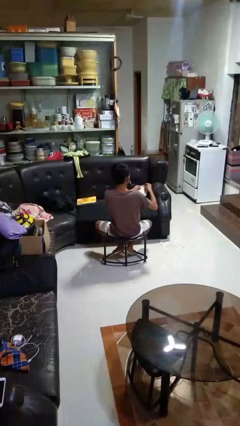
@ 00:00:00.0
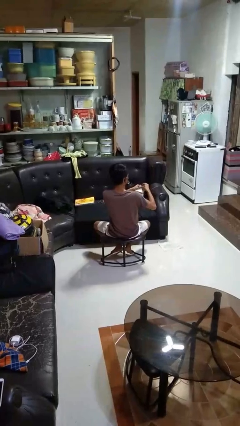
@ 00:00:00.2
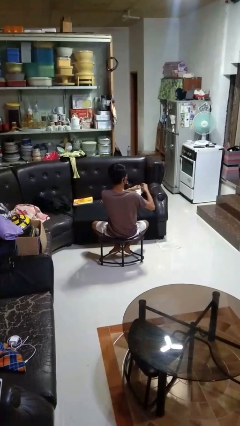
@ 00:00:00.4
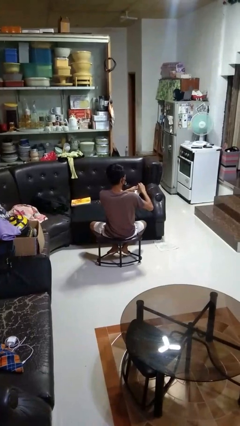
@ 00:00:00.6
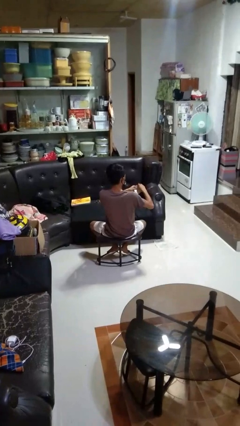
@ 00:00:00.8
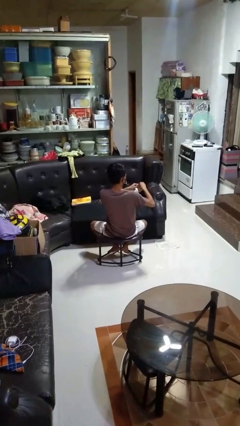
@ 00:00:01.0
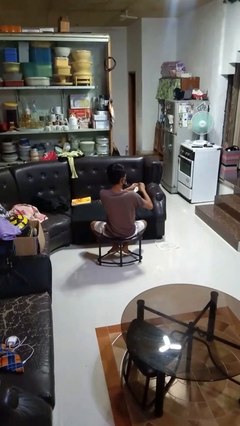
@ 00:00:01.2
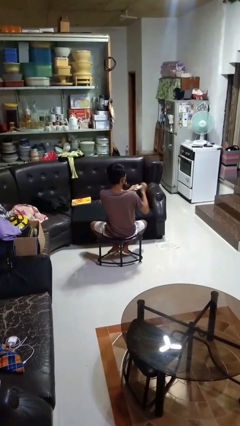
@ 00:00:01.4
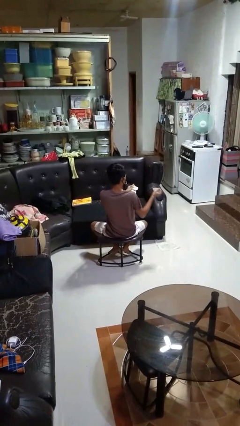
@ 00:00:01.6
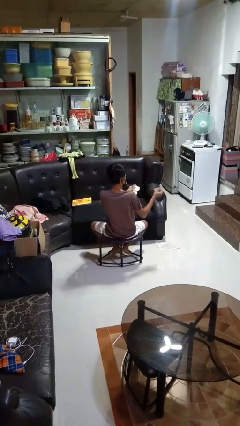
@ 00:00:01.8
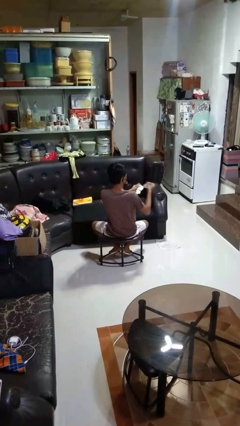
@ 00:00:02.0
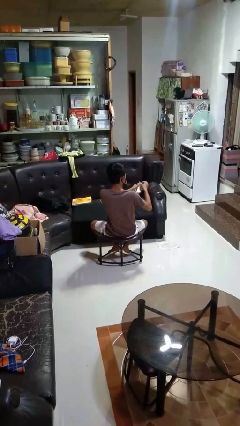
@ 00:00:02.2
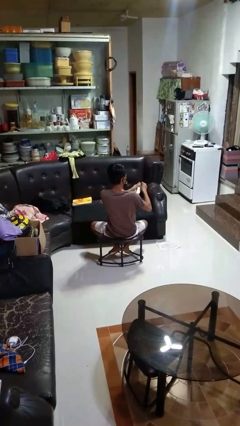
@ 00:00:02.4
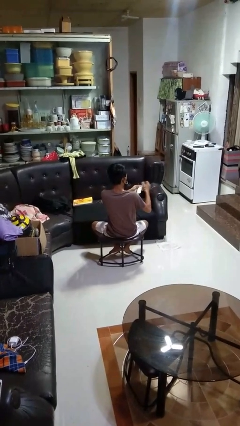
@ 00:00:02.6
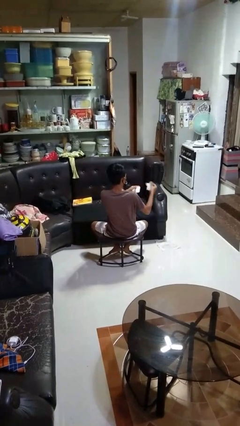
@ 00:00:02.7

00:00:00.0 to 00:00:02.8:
person tears paper

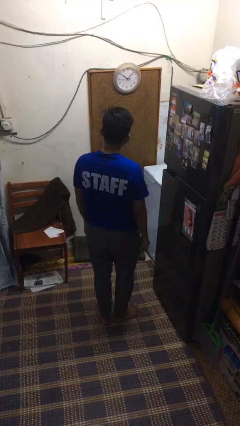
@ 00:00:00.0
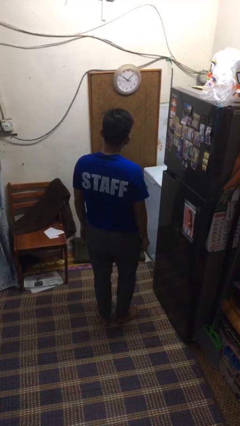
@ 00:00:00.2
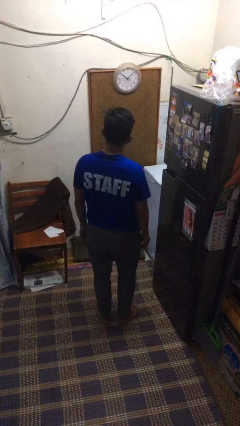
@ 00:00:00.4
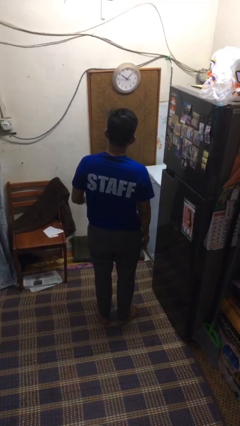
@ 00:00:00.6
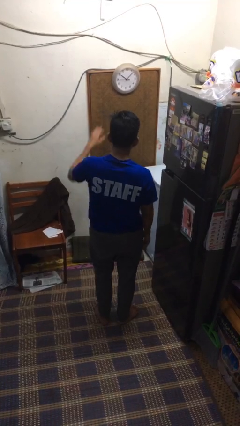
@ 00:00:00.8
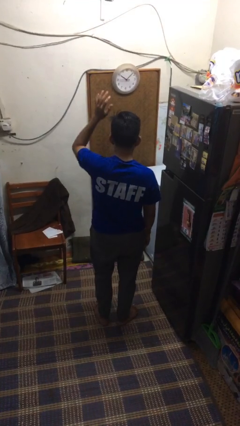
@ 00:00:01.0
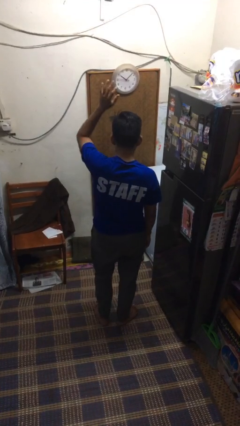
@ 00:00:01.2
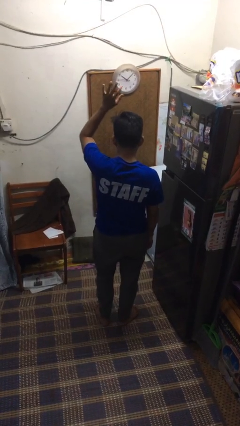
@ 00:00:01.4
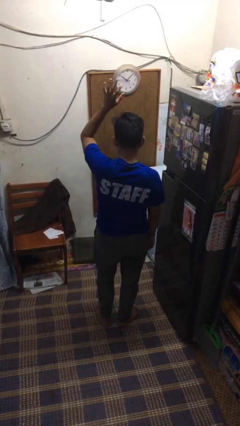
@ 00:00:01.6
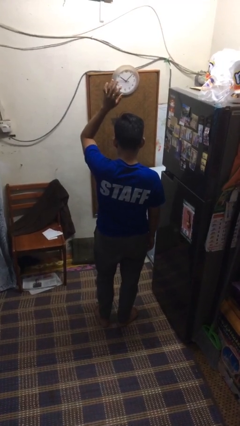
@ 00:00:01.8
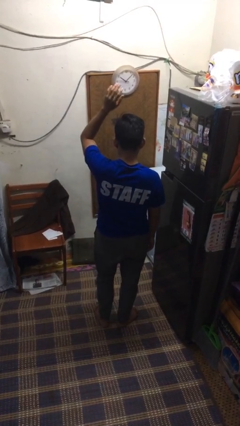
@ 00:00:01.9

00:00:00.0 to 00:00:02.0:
person gestures raise hand

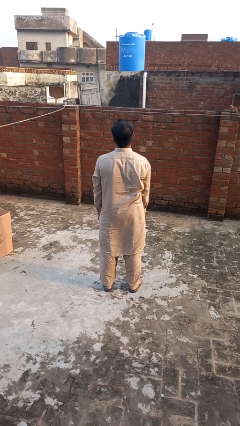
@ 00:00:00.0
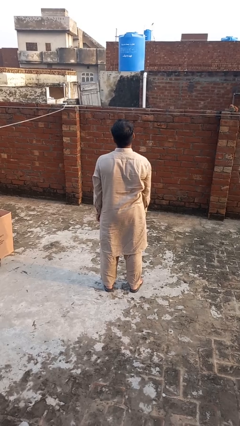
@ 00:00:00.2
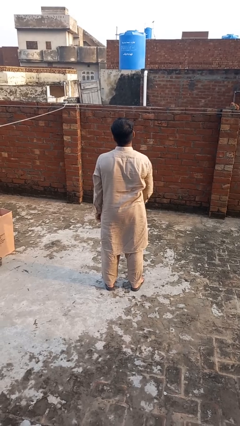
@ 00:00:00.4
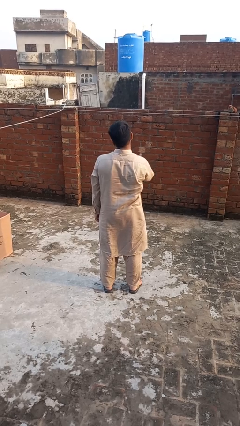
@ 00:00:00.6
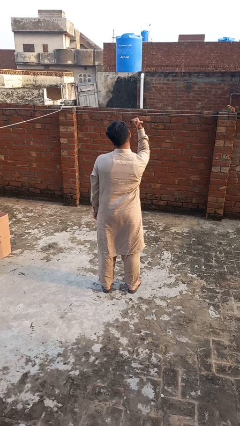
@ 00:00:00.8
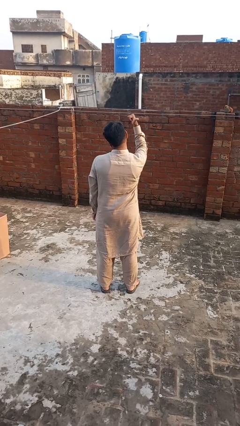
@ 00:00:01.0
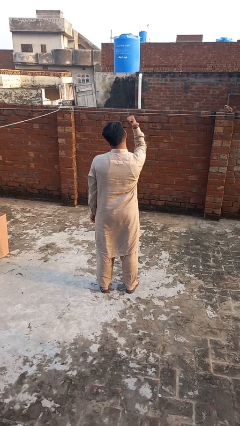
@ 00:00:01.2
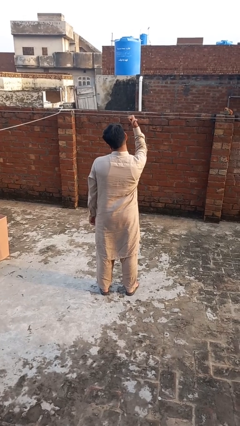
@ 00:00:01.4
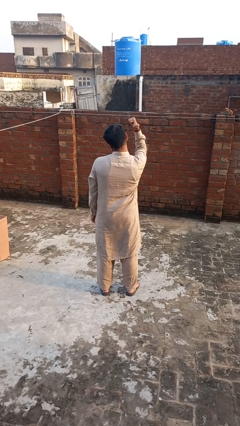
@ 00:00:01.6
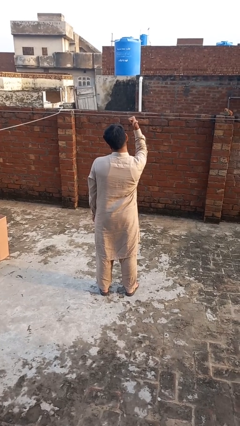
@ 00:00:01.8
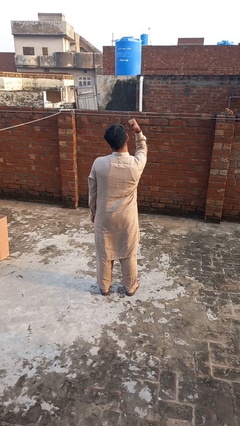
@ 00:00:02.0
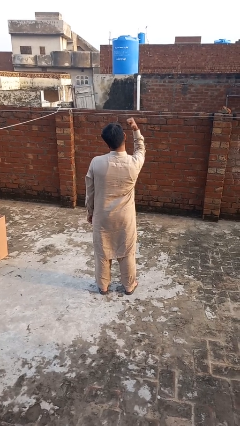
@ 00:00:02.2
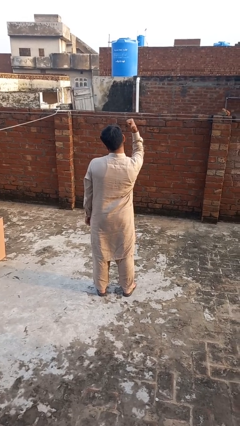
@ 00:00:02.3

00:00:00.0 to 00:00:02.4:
person gestures behind me

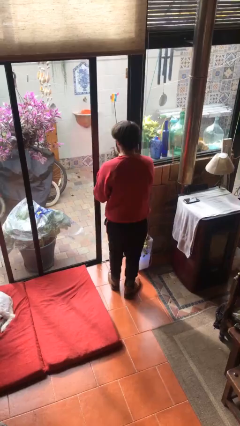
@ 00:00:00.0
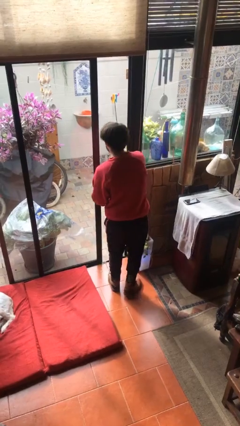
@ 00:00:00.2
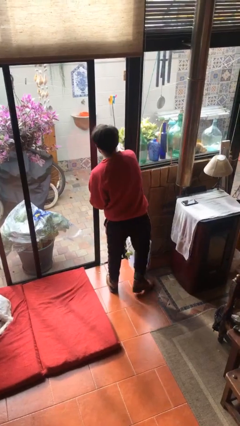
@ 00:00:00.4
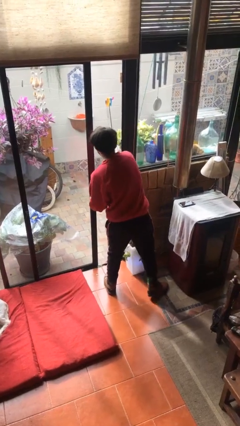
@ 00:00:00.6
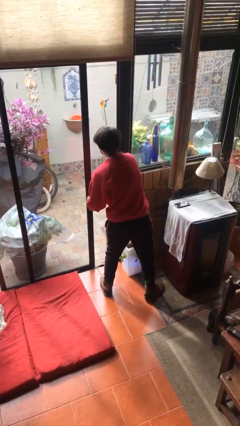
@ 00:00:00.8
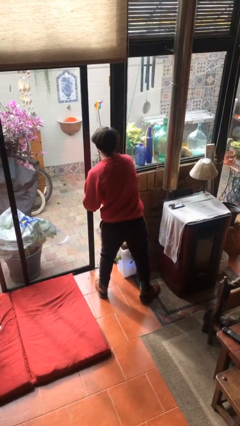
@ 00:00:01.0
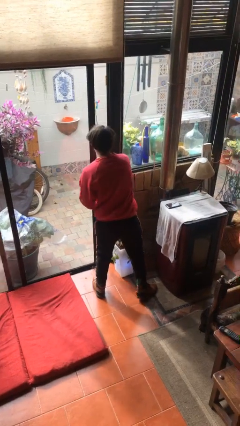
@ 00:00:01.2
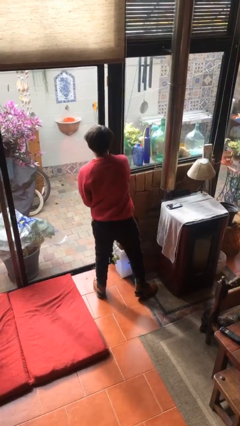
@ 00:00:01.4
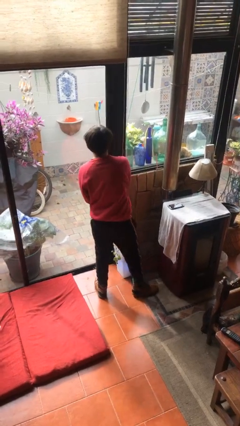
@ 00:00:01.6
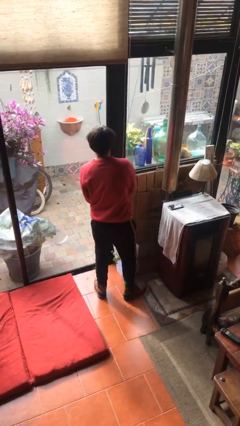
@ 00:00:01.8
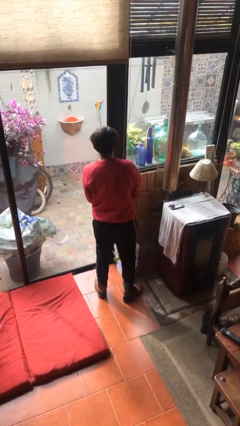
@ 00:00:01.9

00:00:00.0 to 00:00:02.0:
person closes sliding door

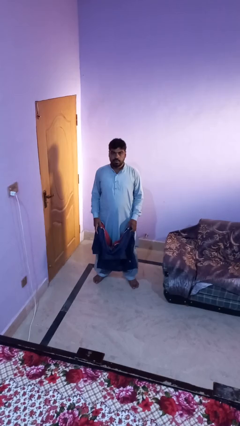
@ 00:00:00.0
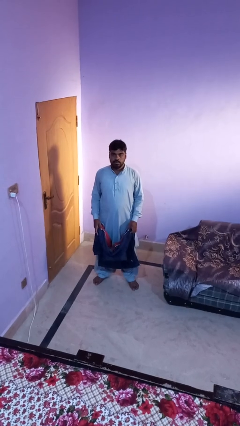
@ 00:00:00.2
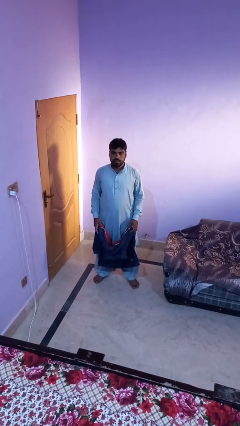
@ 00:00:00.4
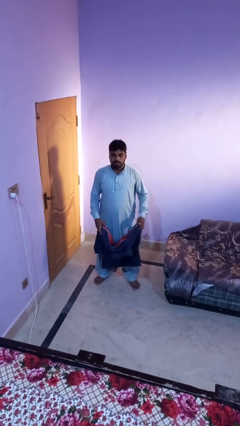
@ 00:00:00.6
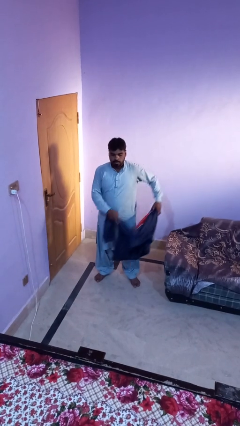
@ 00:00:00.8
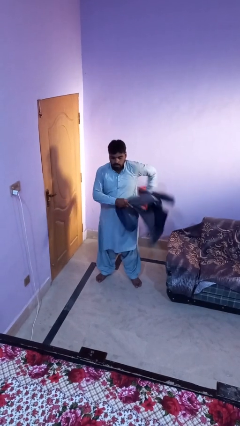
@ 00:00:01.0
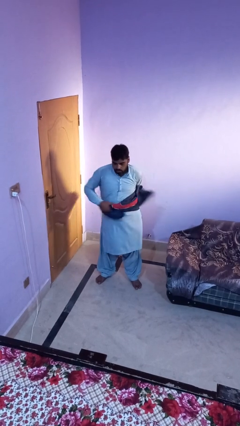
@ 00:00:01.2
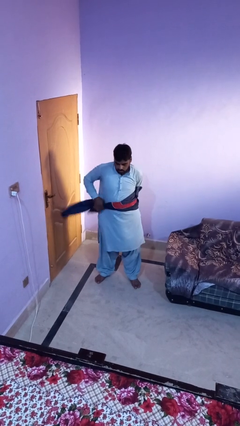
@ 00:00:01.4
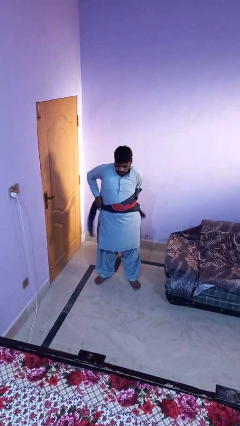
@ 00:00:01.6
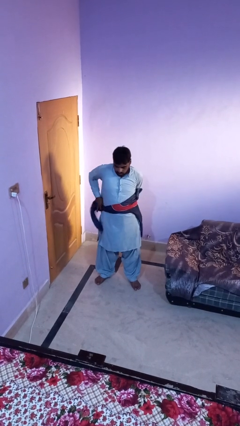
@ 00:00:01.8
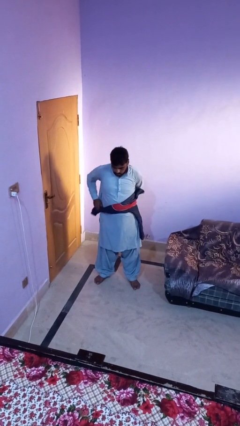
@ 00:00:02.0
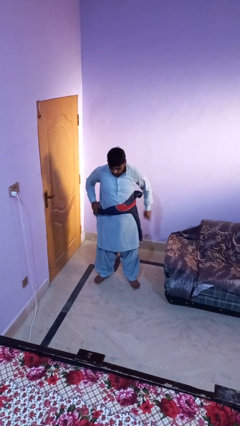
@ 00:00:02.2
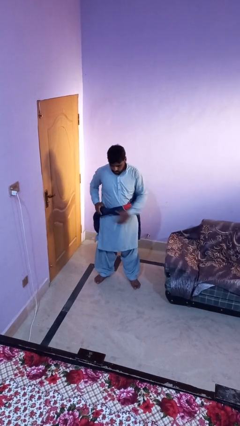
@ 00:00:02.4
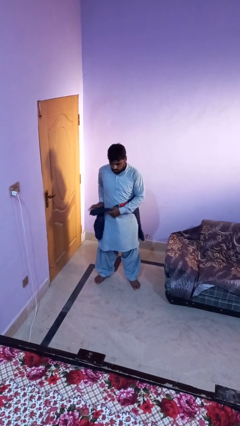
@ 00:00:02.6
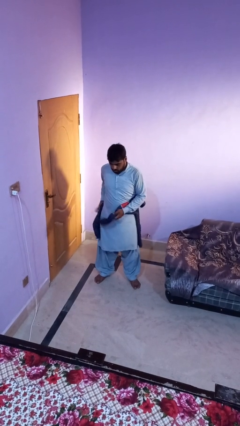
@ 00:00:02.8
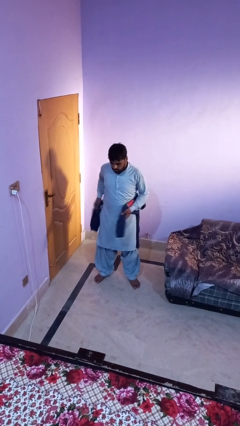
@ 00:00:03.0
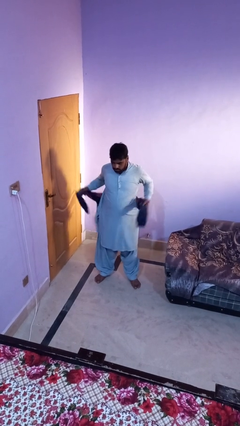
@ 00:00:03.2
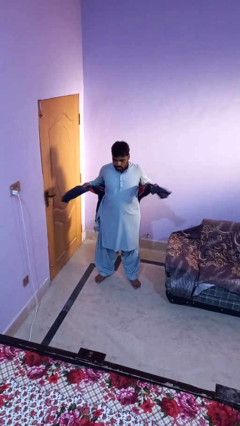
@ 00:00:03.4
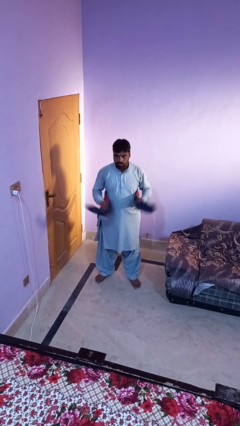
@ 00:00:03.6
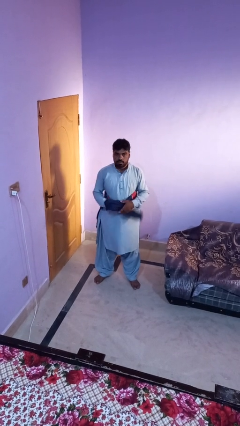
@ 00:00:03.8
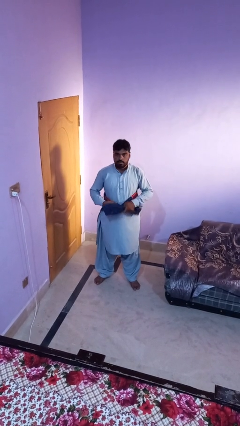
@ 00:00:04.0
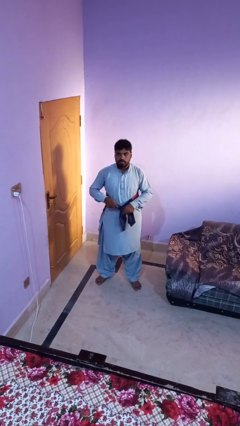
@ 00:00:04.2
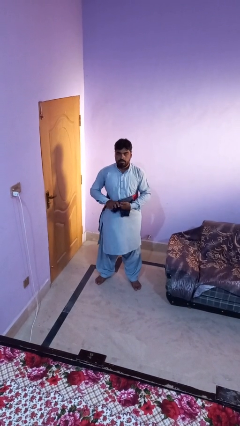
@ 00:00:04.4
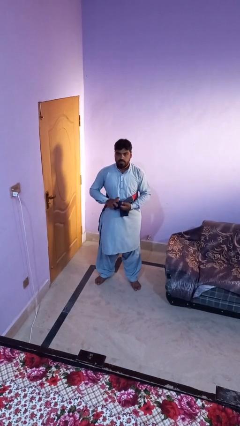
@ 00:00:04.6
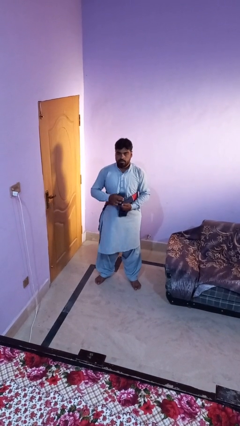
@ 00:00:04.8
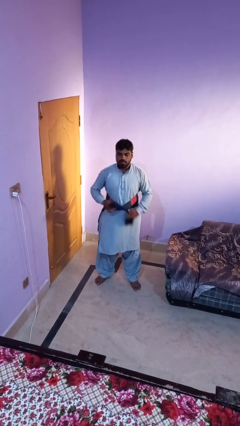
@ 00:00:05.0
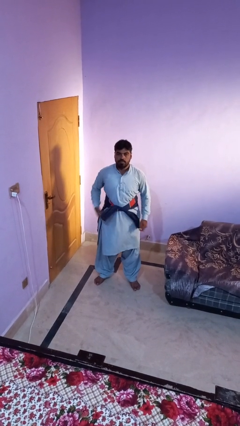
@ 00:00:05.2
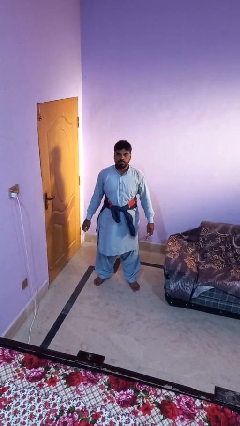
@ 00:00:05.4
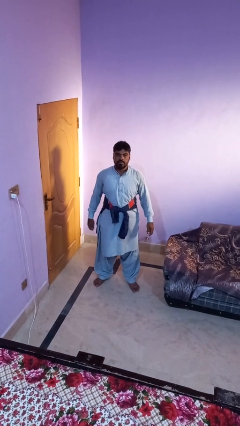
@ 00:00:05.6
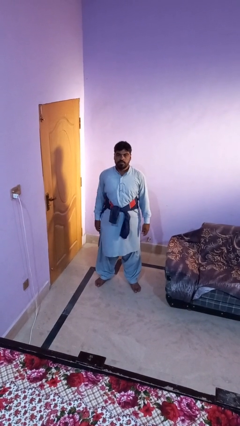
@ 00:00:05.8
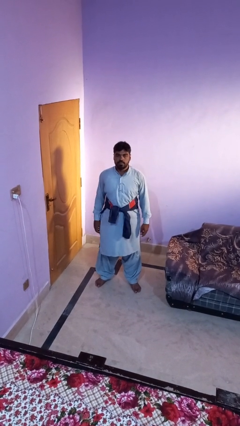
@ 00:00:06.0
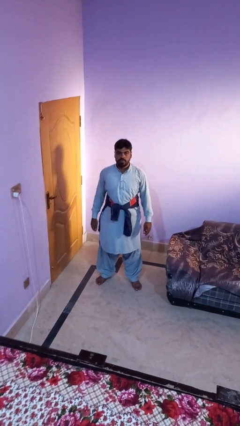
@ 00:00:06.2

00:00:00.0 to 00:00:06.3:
person ties jacket around waist

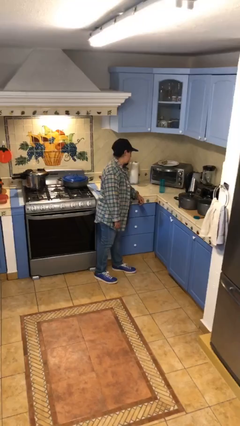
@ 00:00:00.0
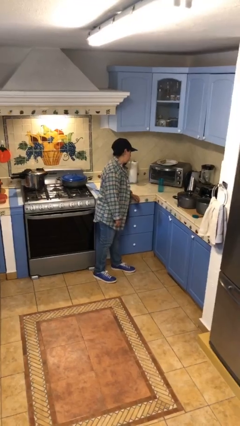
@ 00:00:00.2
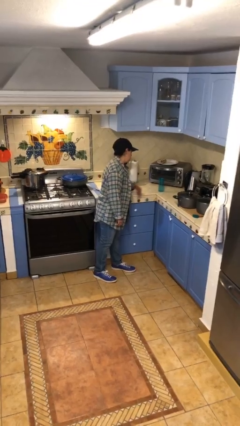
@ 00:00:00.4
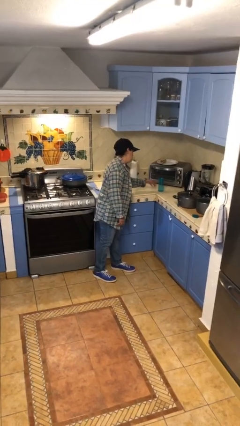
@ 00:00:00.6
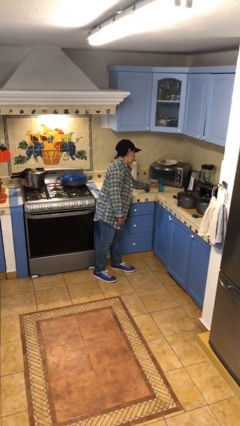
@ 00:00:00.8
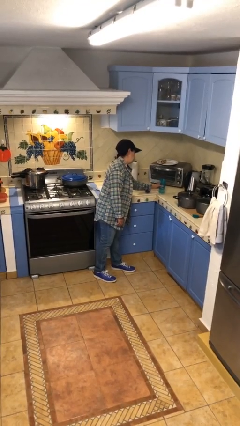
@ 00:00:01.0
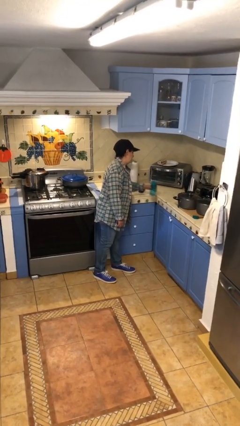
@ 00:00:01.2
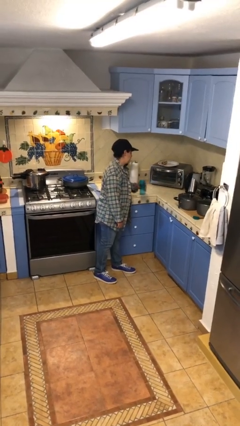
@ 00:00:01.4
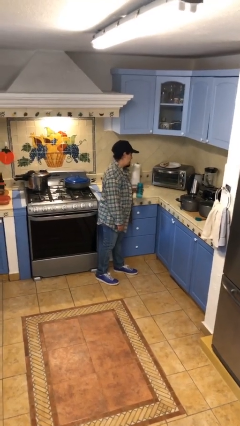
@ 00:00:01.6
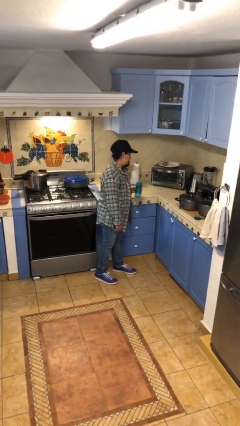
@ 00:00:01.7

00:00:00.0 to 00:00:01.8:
person picks up object from countertop
